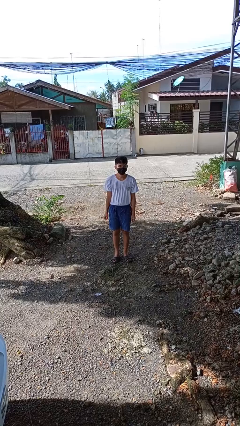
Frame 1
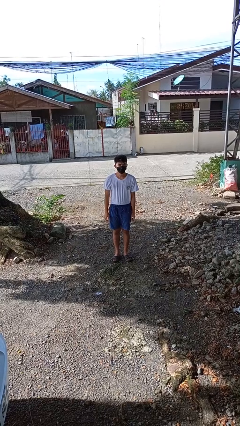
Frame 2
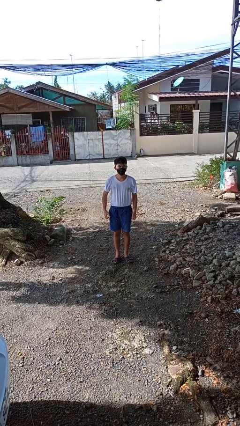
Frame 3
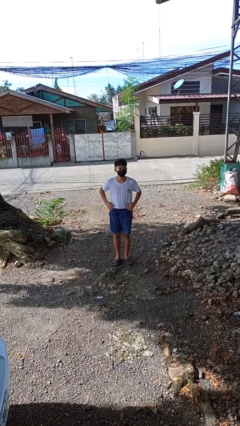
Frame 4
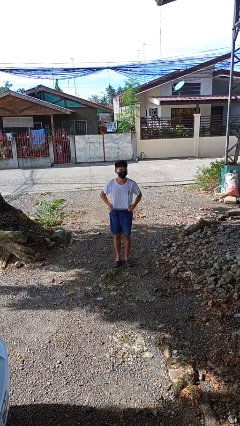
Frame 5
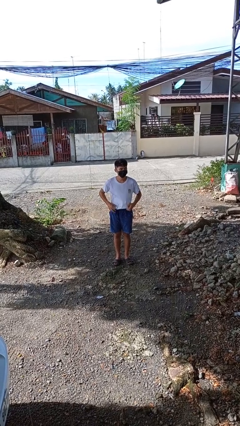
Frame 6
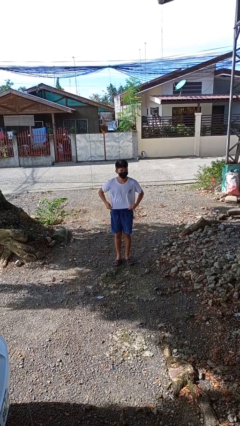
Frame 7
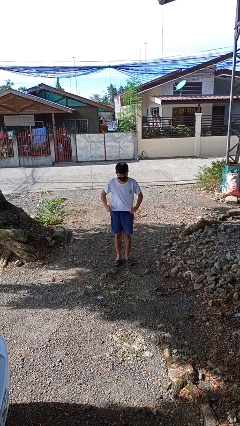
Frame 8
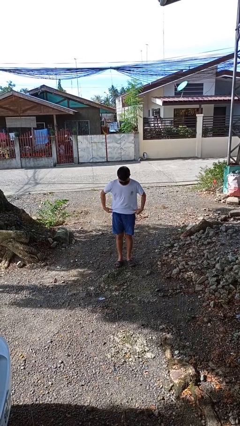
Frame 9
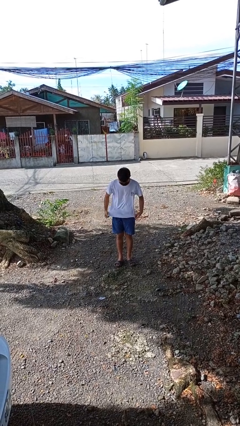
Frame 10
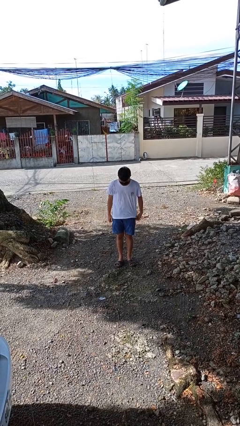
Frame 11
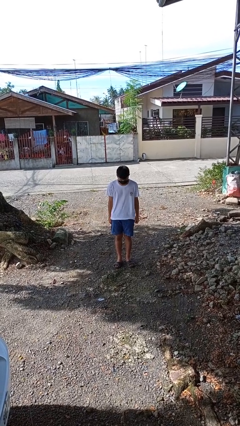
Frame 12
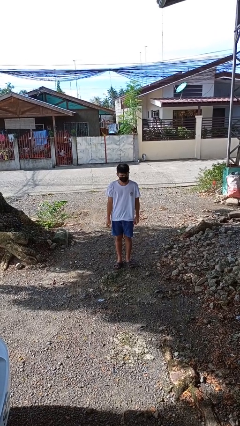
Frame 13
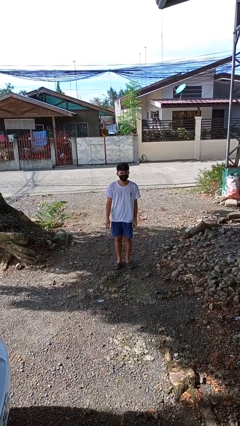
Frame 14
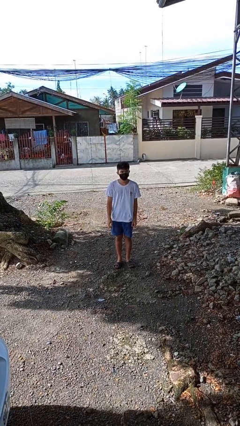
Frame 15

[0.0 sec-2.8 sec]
person untucks shirt

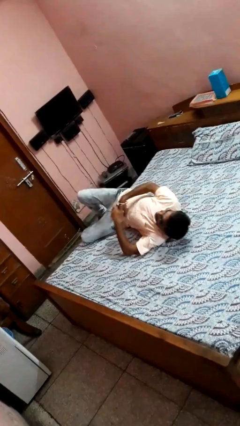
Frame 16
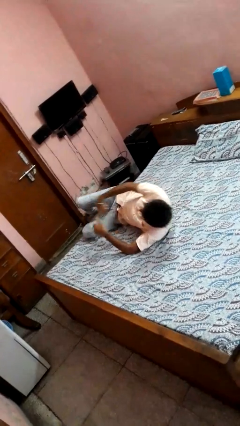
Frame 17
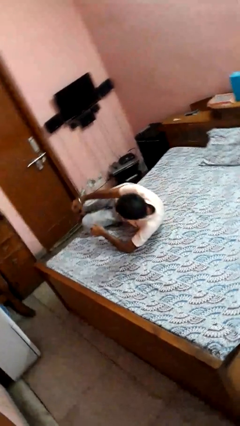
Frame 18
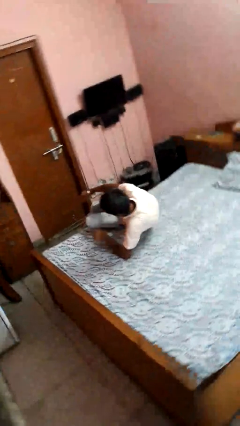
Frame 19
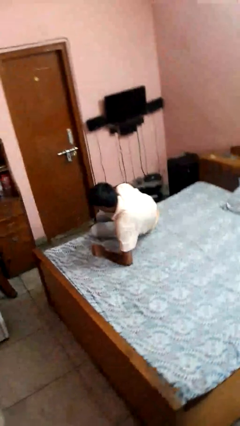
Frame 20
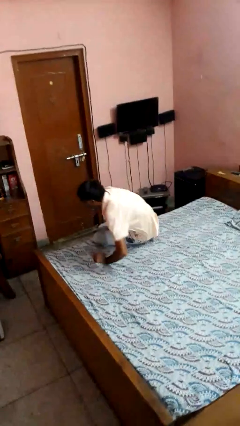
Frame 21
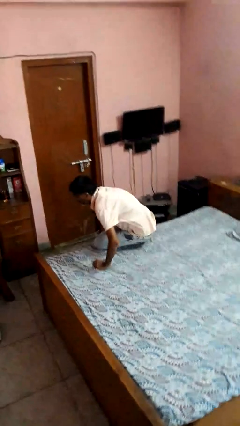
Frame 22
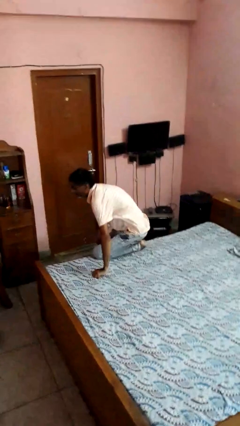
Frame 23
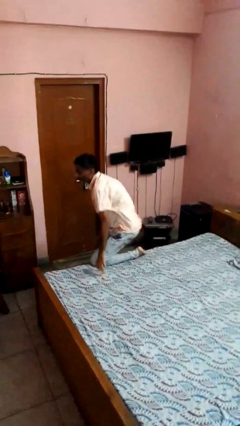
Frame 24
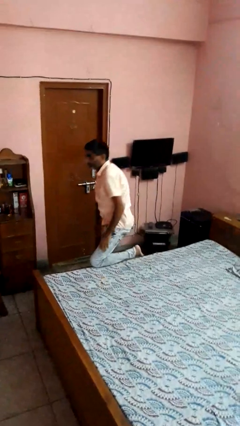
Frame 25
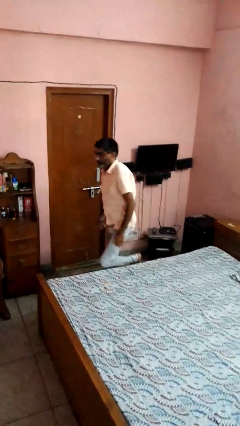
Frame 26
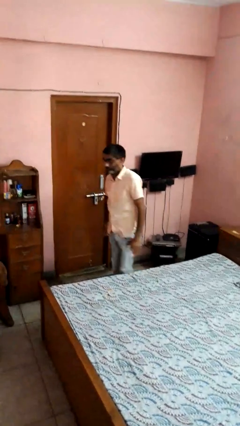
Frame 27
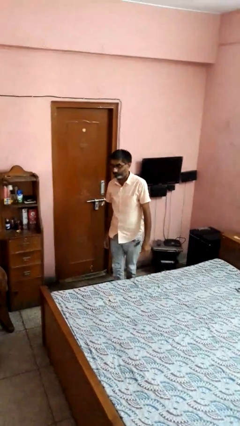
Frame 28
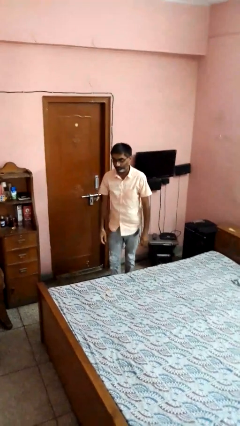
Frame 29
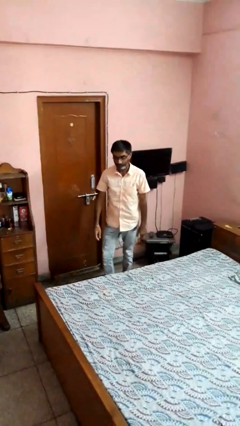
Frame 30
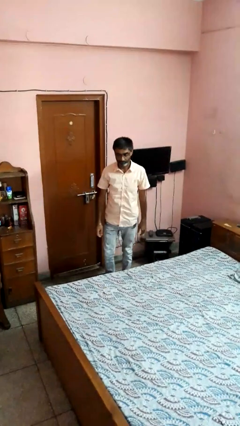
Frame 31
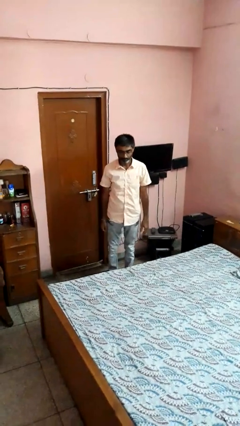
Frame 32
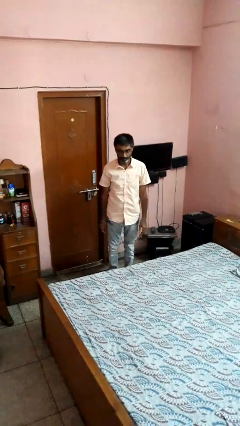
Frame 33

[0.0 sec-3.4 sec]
person stands up

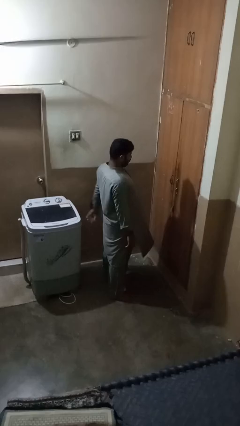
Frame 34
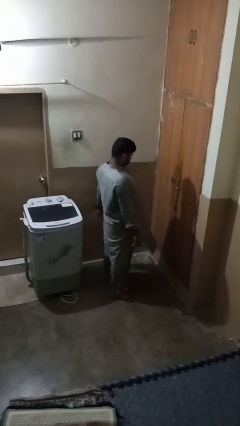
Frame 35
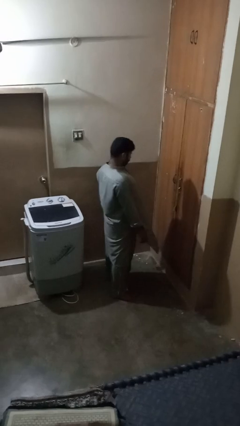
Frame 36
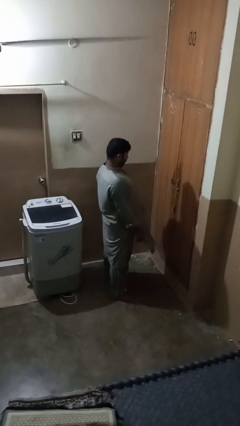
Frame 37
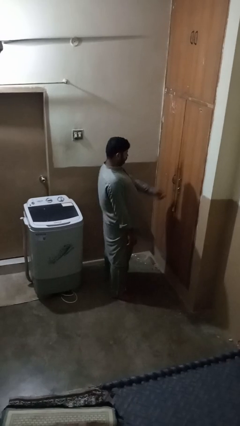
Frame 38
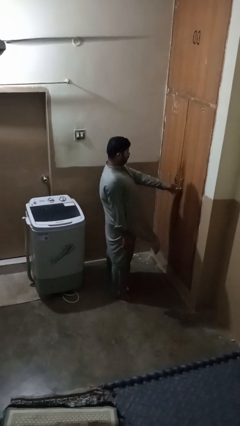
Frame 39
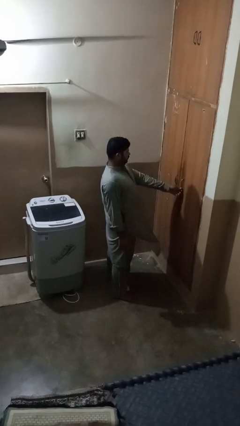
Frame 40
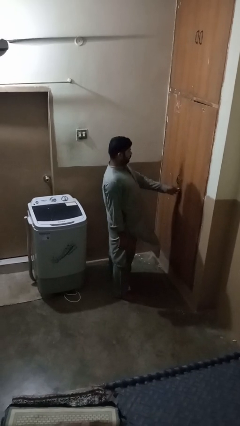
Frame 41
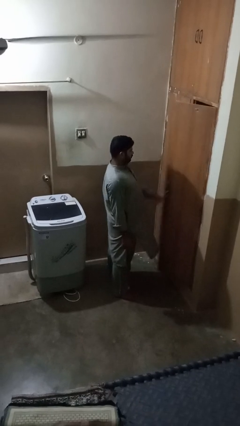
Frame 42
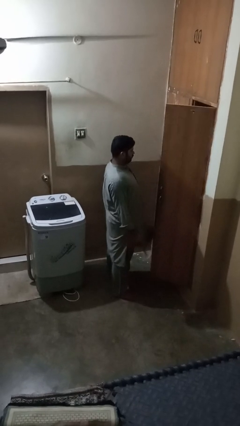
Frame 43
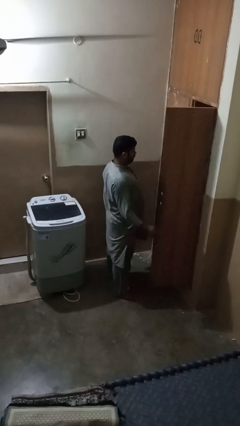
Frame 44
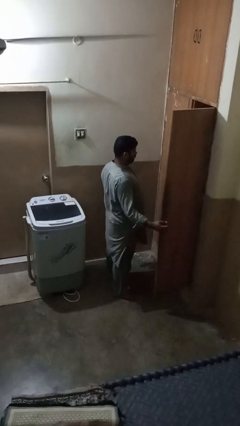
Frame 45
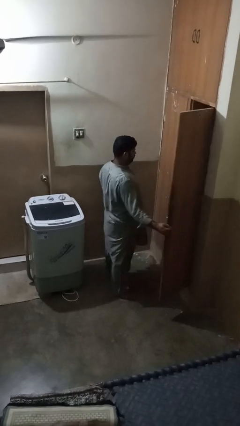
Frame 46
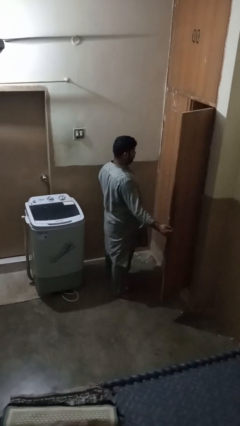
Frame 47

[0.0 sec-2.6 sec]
person opens closet door

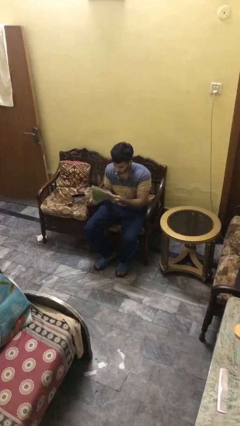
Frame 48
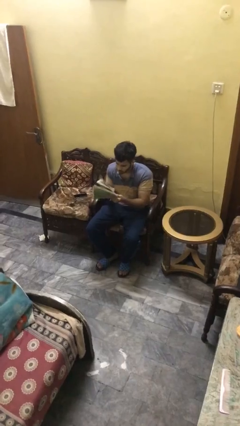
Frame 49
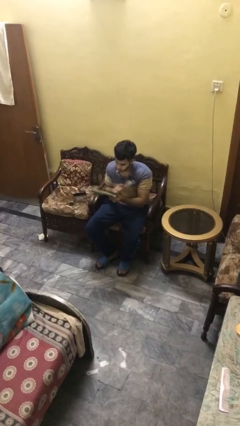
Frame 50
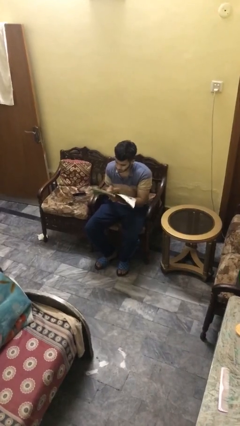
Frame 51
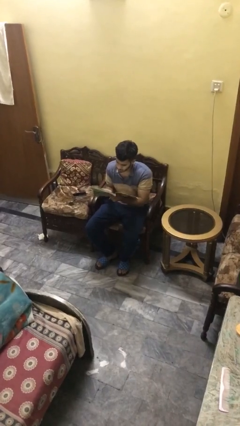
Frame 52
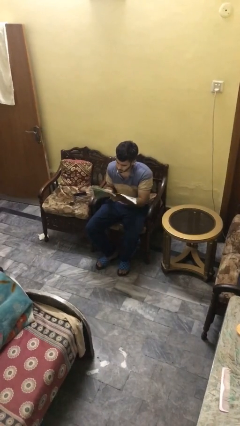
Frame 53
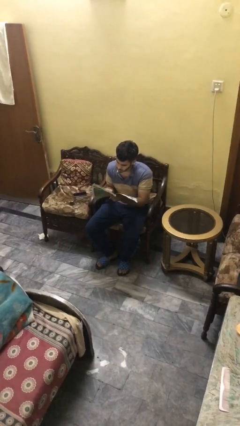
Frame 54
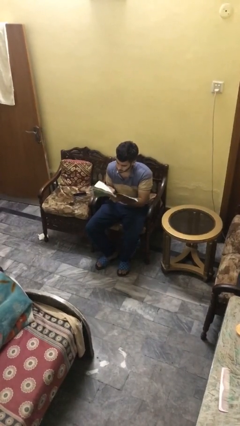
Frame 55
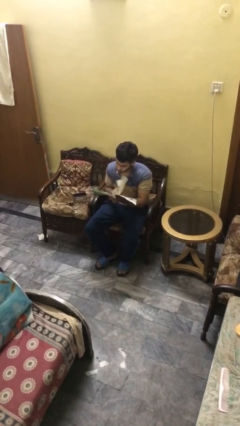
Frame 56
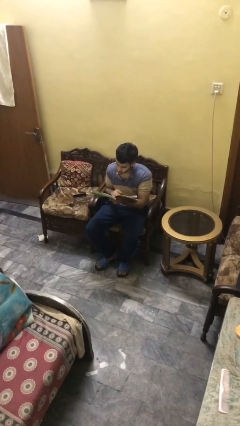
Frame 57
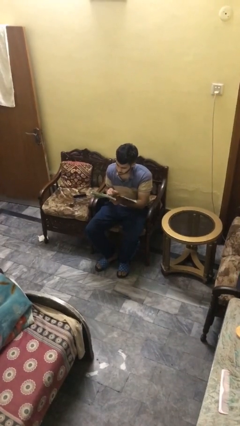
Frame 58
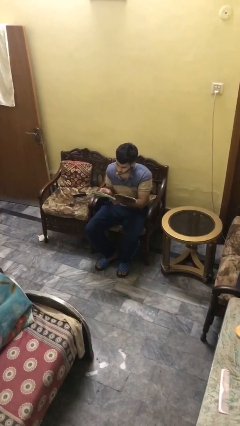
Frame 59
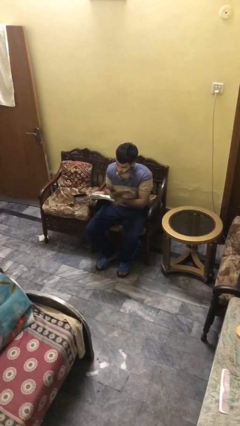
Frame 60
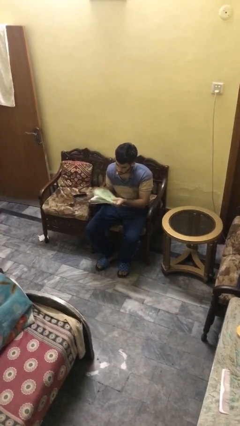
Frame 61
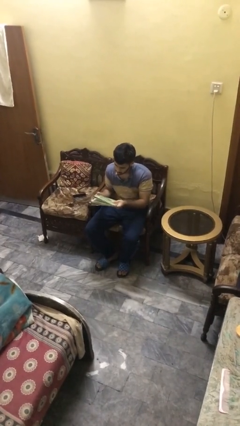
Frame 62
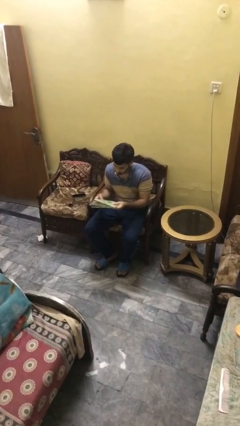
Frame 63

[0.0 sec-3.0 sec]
person reads document

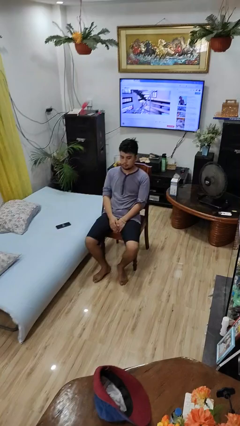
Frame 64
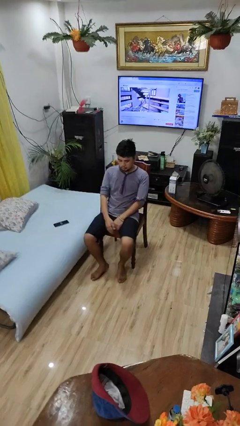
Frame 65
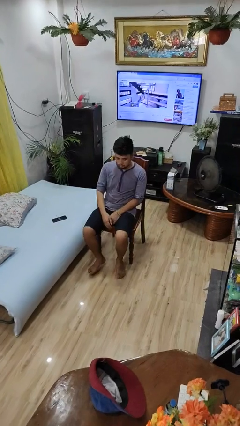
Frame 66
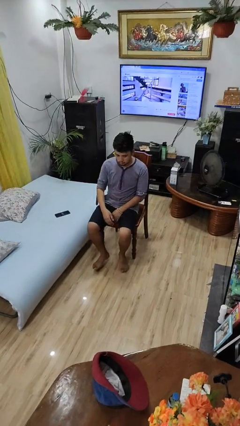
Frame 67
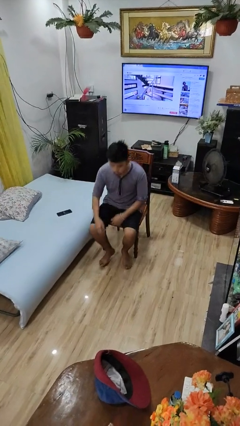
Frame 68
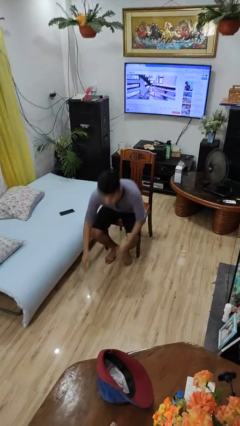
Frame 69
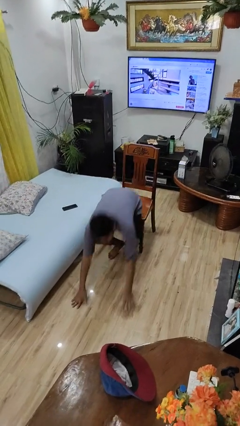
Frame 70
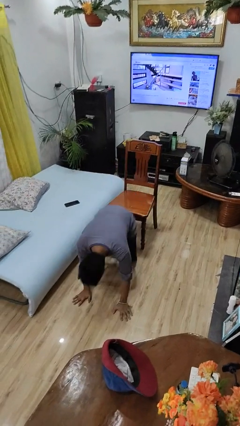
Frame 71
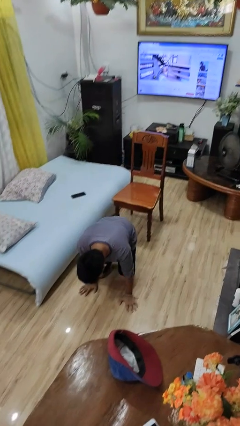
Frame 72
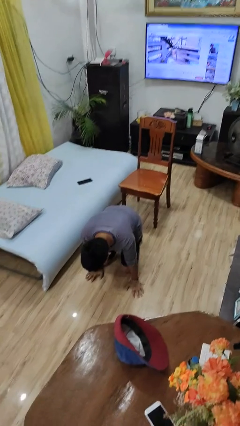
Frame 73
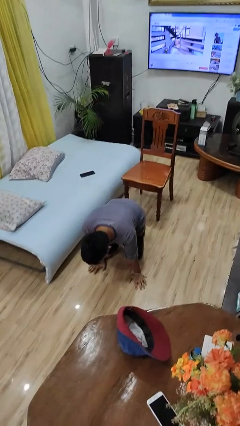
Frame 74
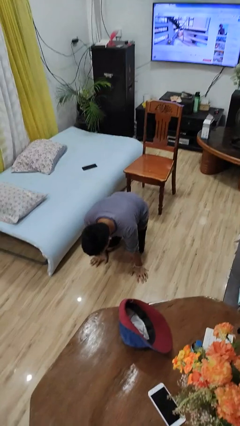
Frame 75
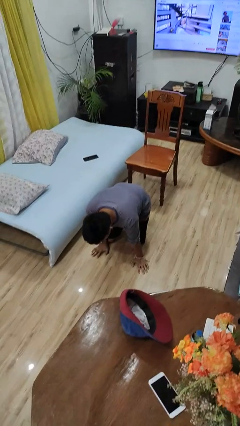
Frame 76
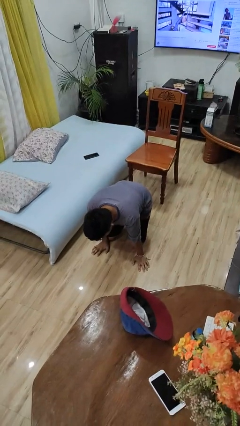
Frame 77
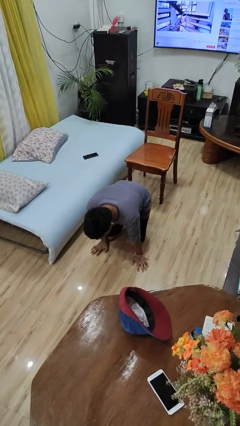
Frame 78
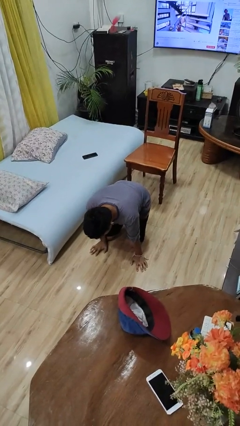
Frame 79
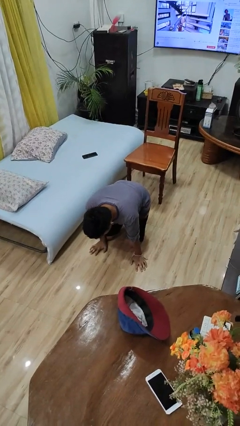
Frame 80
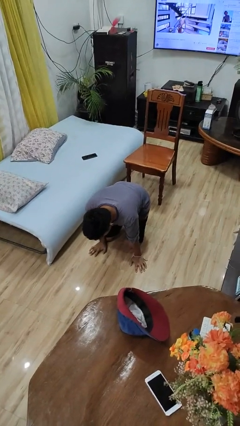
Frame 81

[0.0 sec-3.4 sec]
person falls from chair

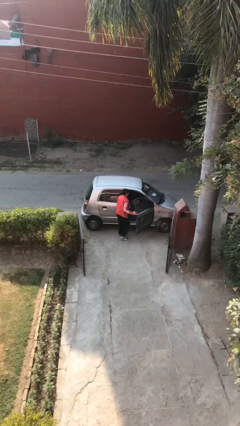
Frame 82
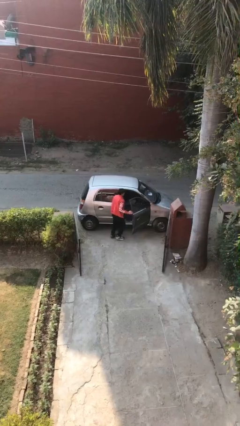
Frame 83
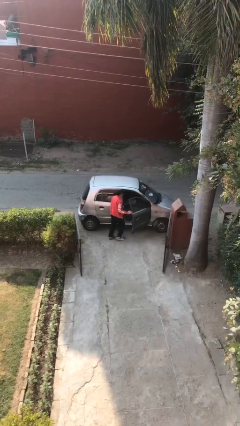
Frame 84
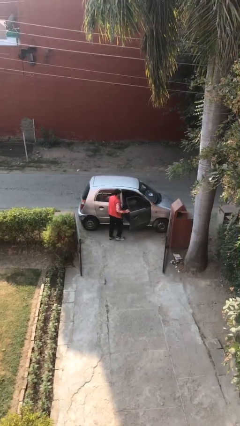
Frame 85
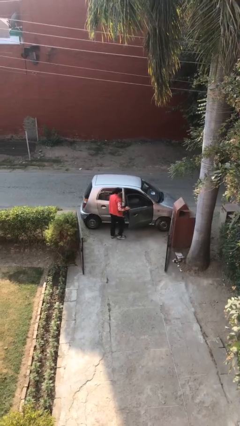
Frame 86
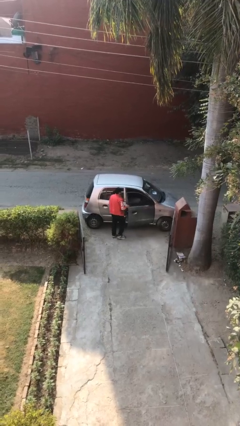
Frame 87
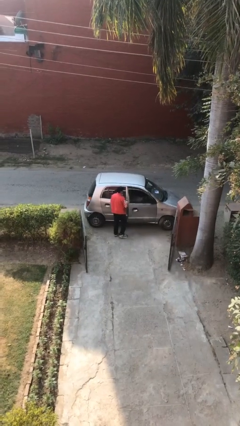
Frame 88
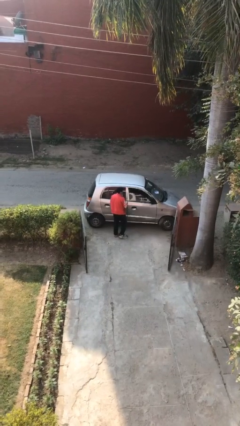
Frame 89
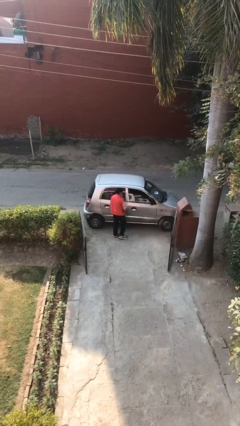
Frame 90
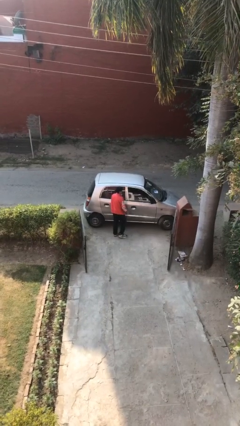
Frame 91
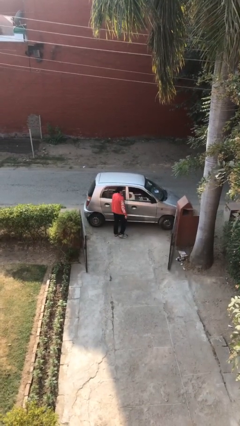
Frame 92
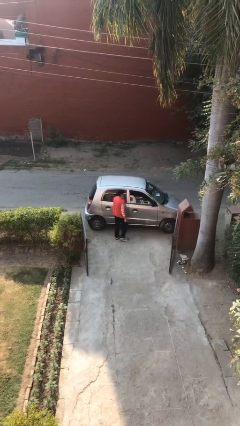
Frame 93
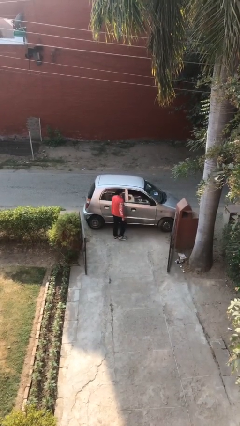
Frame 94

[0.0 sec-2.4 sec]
person closes car door
